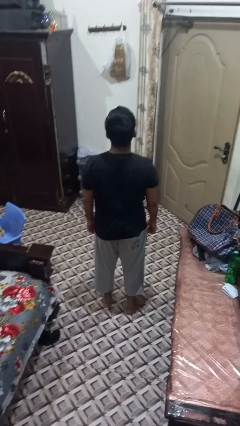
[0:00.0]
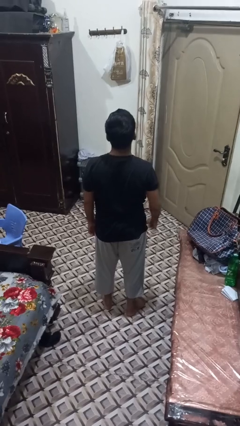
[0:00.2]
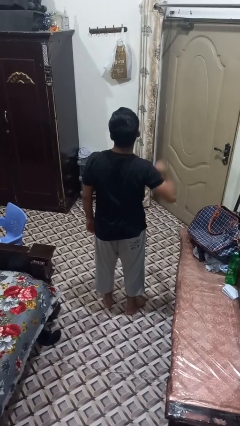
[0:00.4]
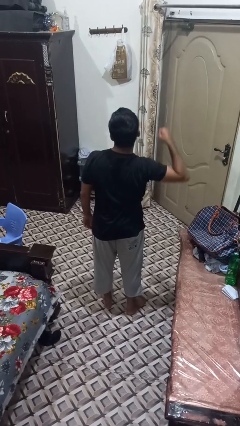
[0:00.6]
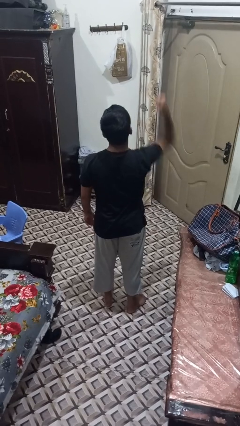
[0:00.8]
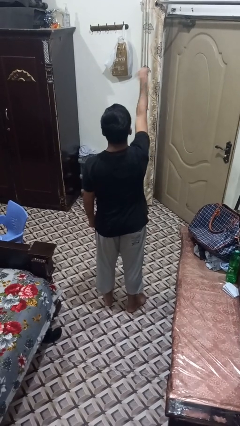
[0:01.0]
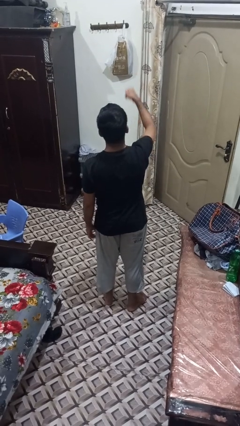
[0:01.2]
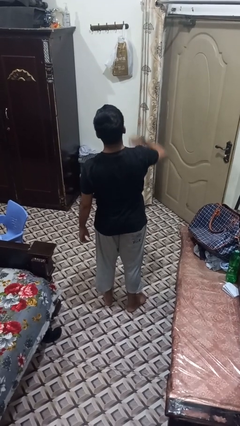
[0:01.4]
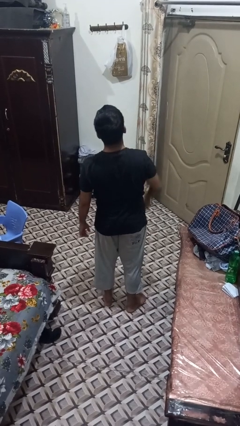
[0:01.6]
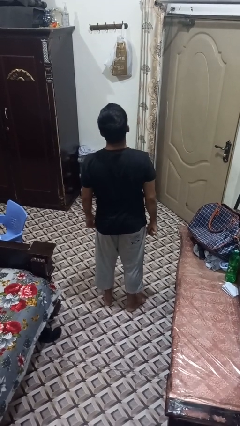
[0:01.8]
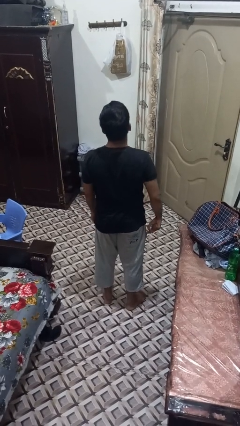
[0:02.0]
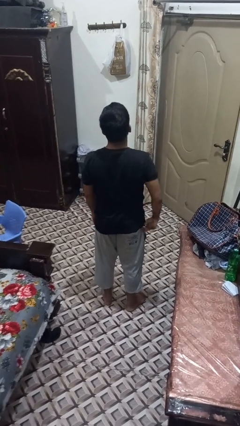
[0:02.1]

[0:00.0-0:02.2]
person punches

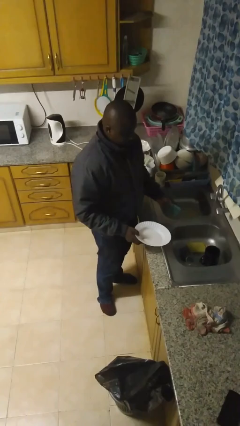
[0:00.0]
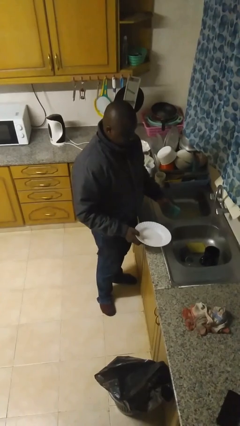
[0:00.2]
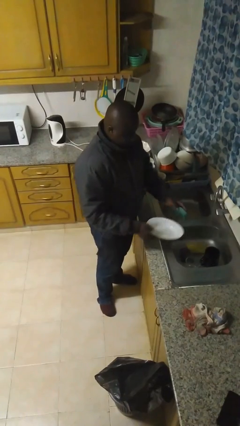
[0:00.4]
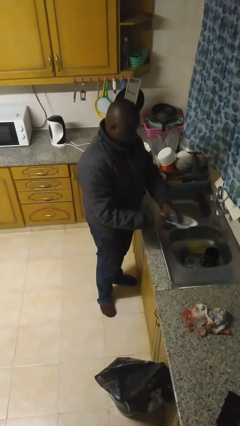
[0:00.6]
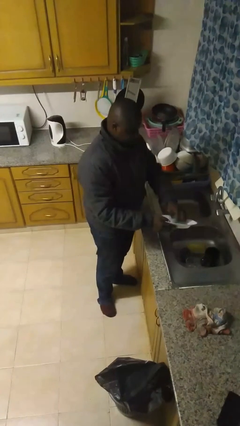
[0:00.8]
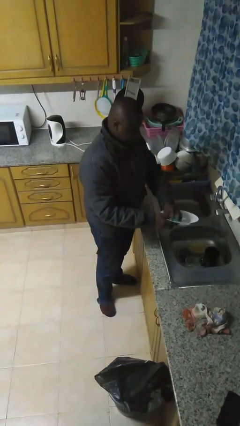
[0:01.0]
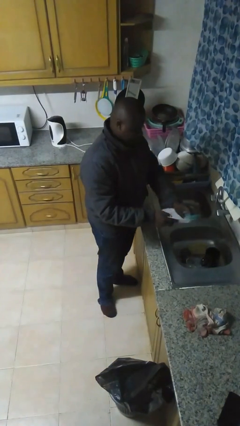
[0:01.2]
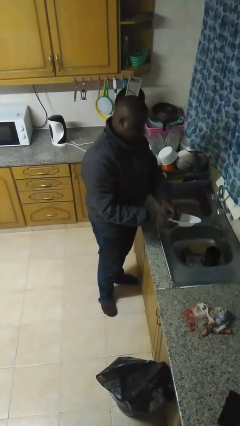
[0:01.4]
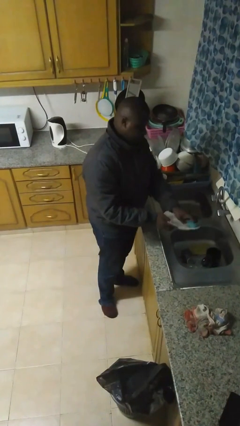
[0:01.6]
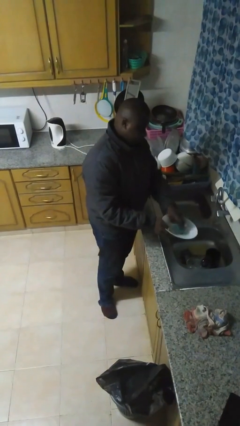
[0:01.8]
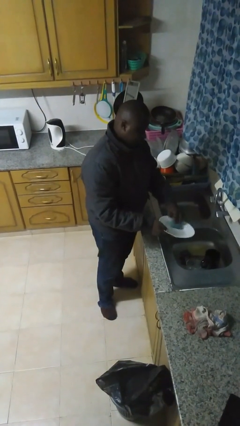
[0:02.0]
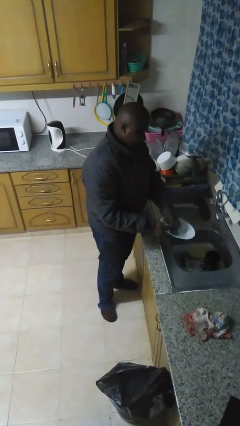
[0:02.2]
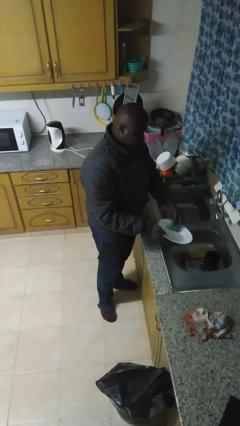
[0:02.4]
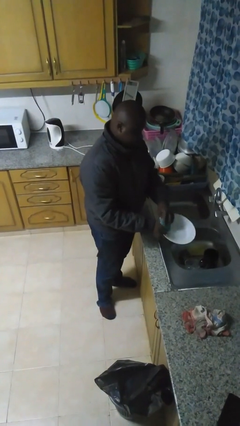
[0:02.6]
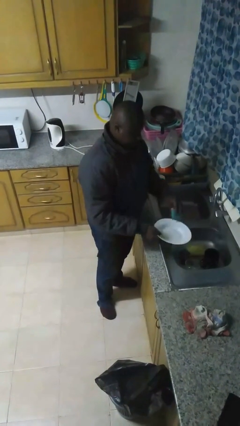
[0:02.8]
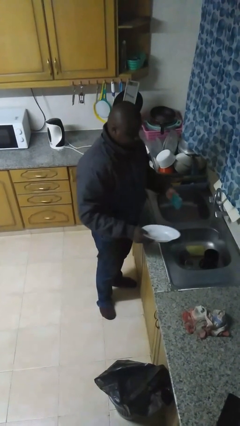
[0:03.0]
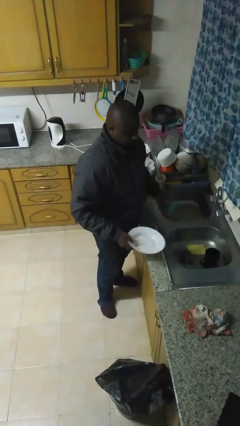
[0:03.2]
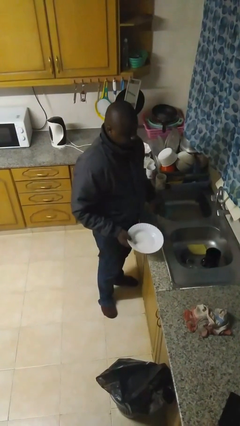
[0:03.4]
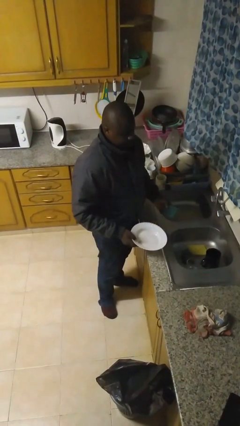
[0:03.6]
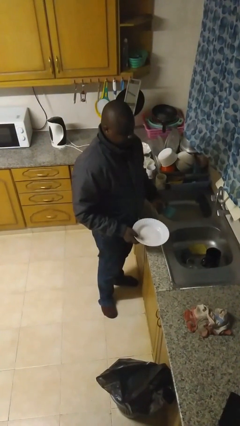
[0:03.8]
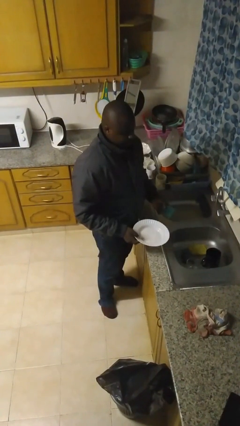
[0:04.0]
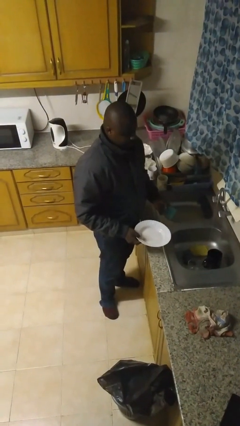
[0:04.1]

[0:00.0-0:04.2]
person washes dish

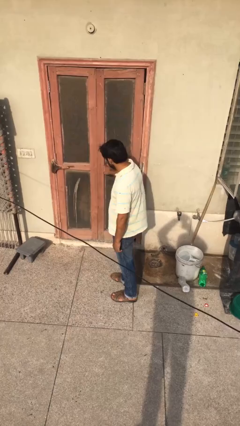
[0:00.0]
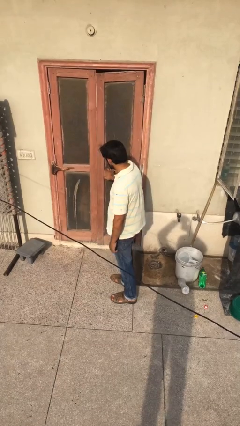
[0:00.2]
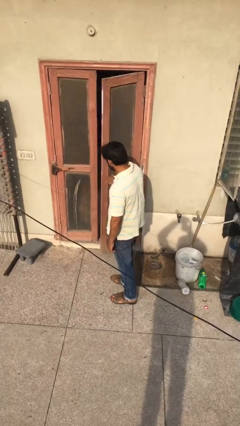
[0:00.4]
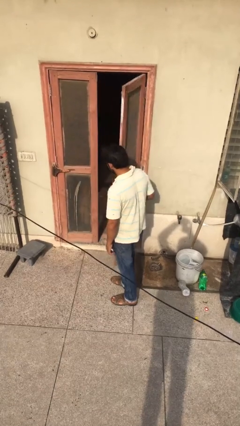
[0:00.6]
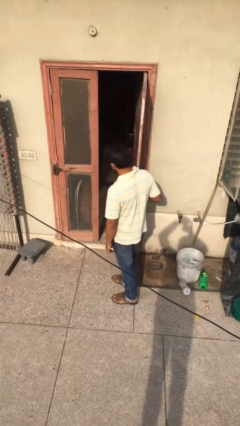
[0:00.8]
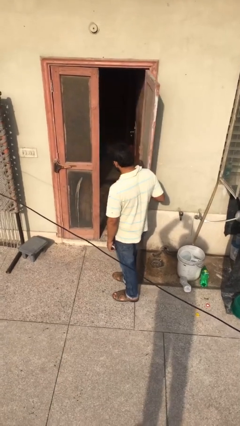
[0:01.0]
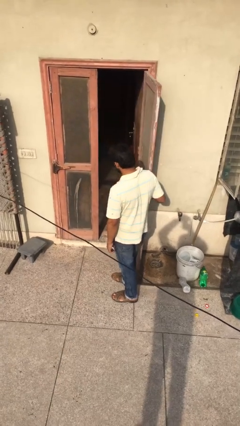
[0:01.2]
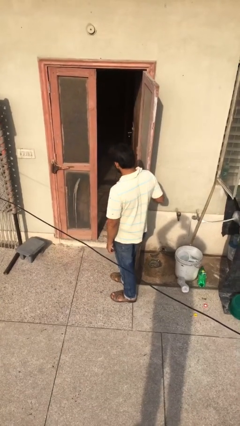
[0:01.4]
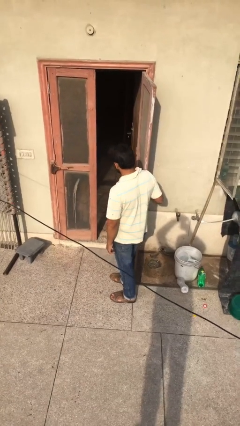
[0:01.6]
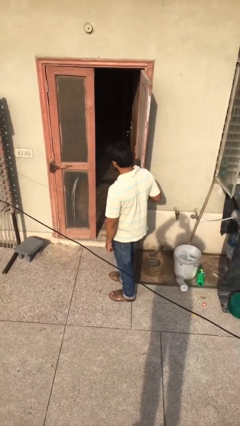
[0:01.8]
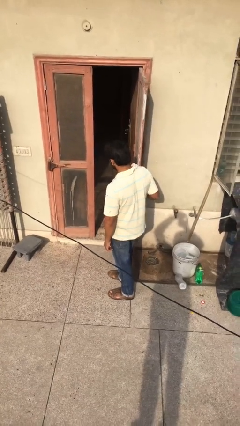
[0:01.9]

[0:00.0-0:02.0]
person opens facility door

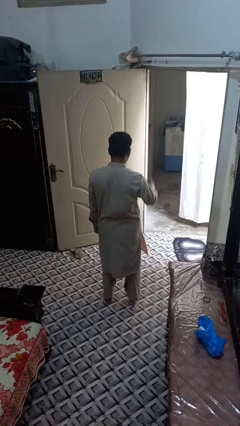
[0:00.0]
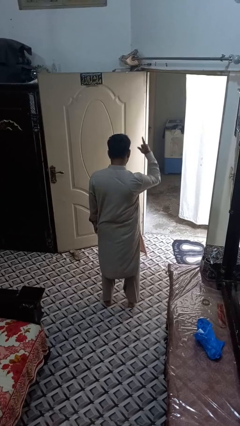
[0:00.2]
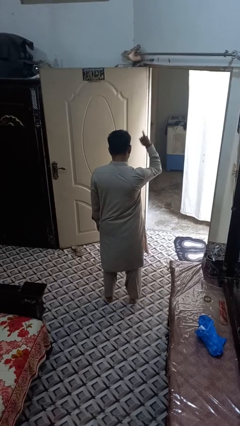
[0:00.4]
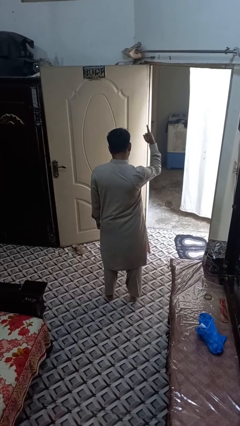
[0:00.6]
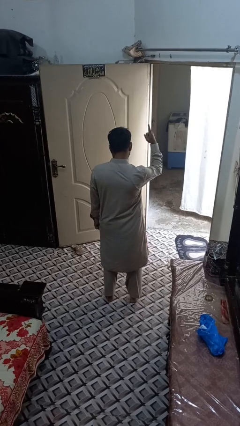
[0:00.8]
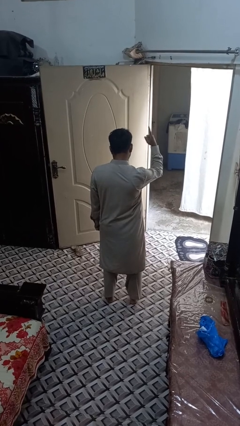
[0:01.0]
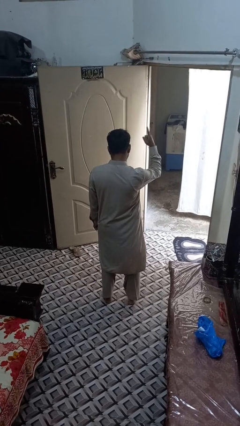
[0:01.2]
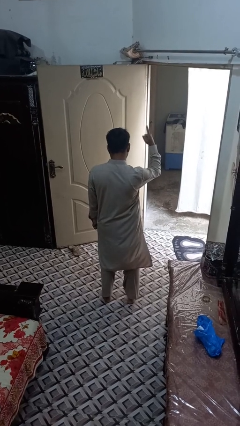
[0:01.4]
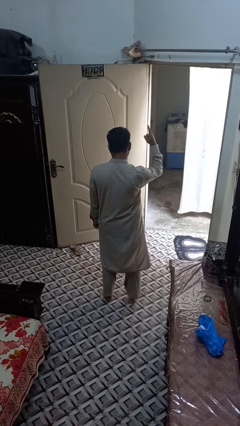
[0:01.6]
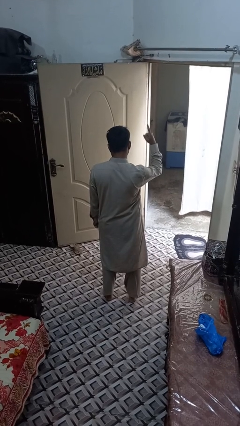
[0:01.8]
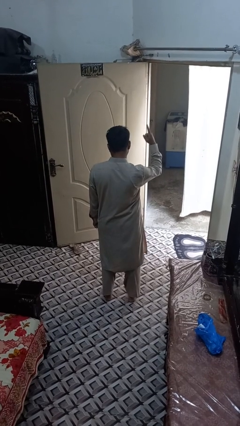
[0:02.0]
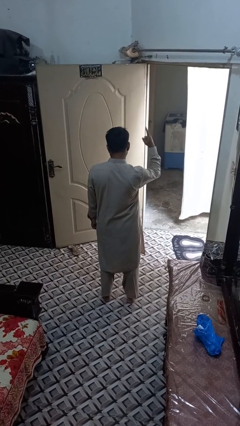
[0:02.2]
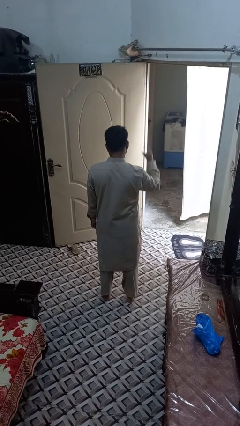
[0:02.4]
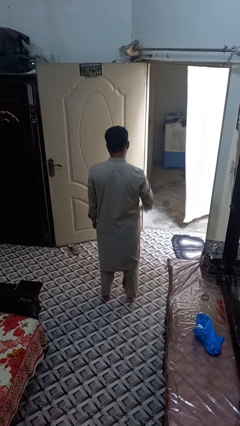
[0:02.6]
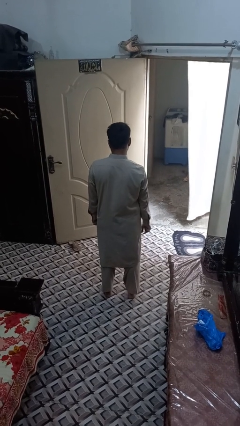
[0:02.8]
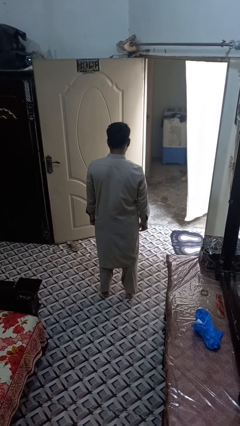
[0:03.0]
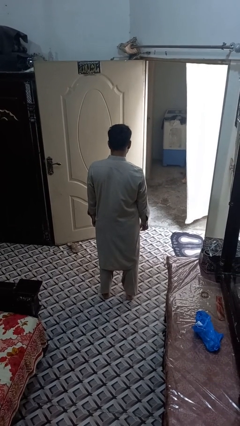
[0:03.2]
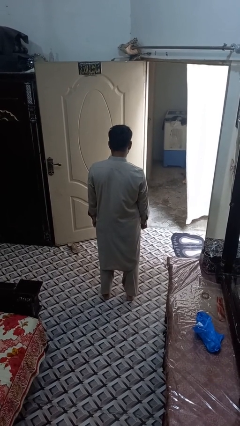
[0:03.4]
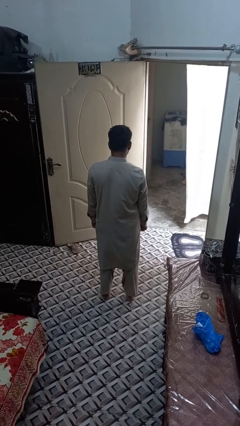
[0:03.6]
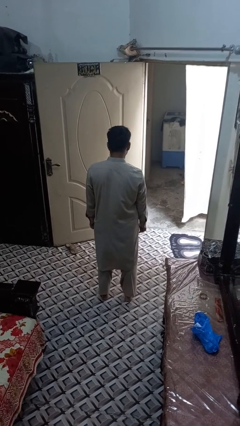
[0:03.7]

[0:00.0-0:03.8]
person gestures number one

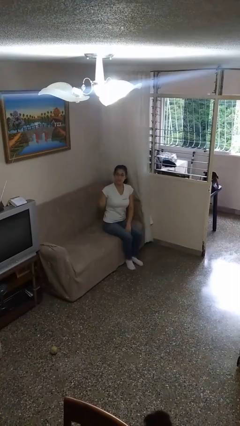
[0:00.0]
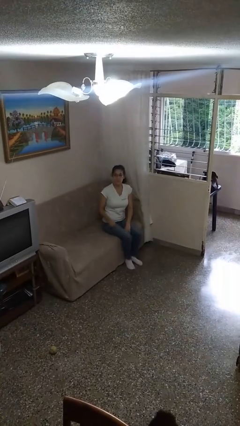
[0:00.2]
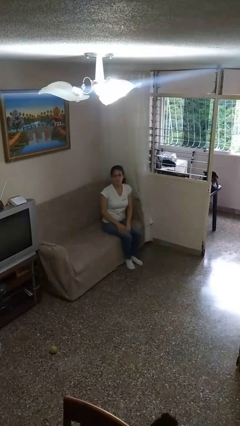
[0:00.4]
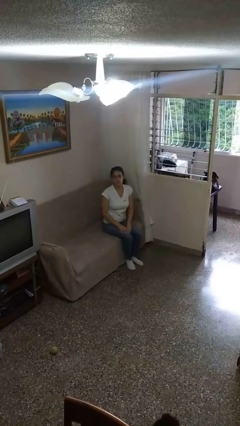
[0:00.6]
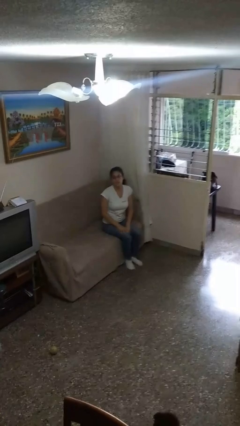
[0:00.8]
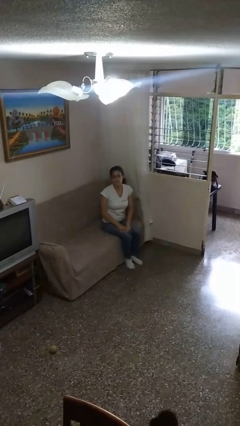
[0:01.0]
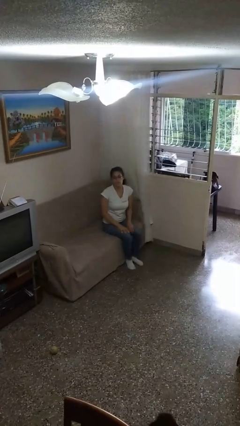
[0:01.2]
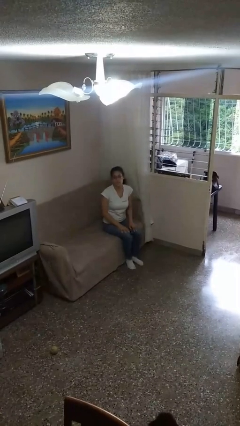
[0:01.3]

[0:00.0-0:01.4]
person gestures lower hand

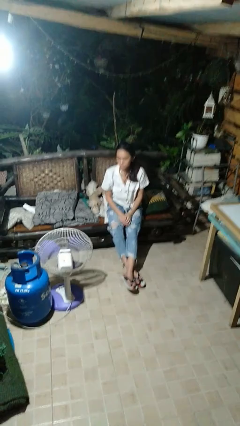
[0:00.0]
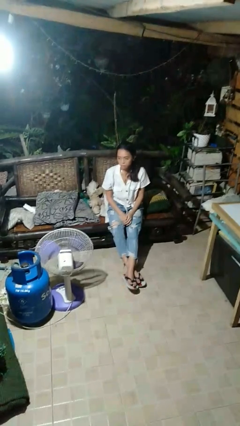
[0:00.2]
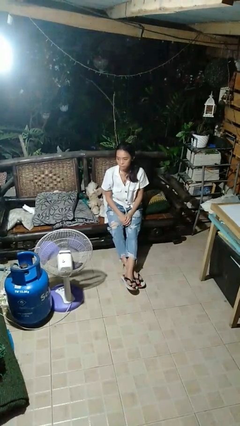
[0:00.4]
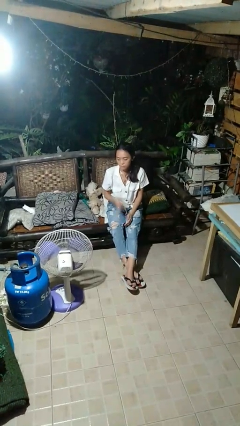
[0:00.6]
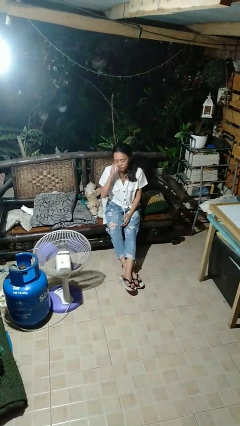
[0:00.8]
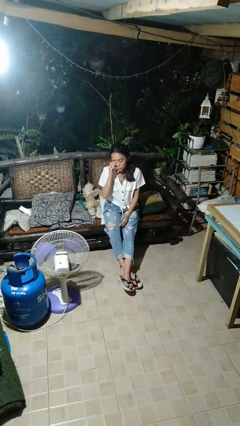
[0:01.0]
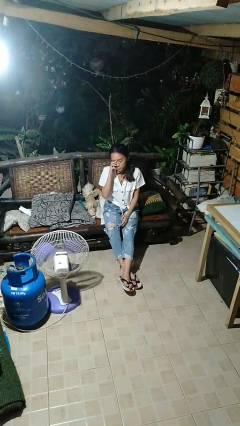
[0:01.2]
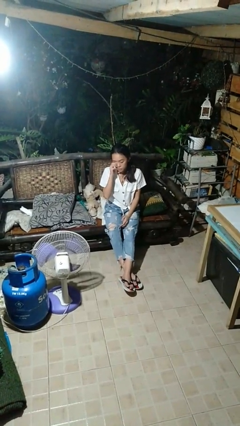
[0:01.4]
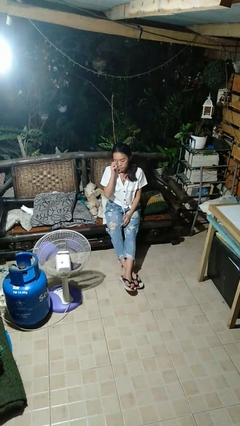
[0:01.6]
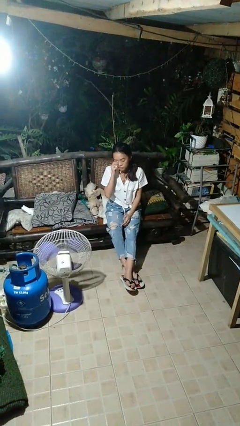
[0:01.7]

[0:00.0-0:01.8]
person rubs eyes

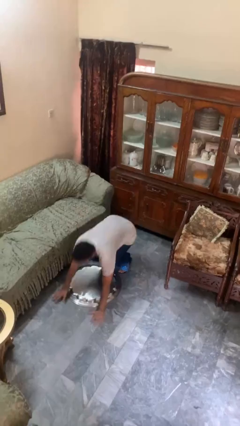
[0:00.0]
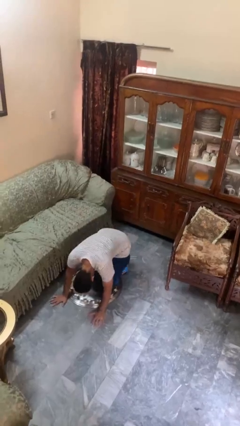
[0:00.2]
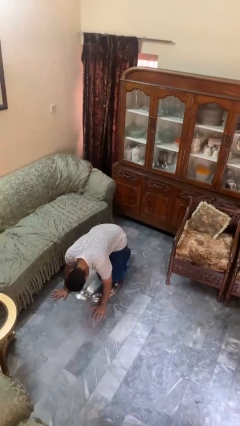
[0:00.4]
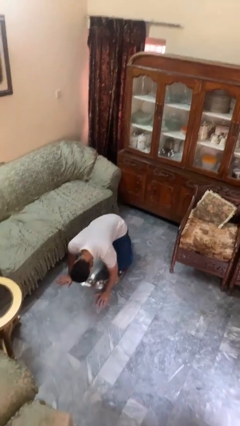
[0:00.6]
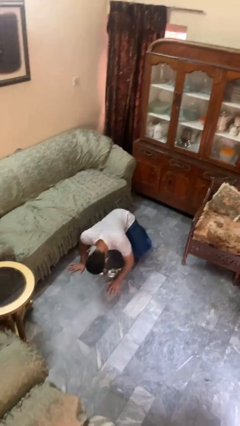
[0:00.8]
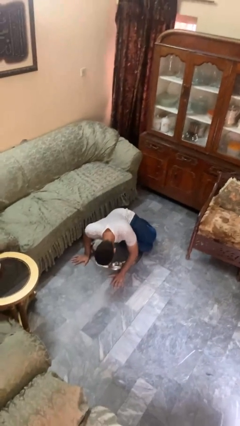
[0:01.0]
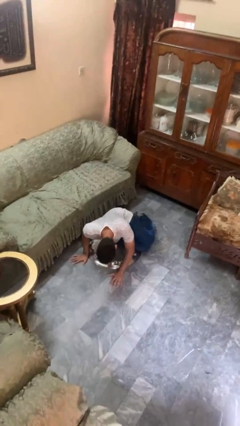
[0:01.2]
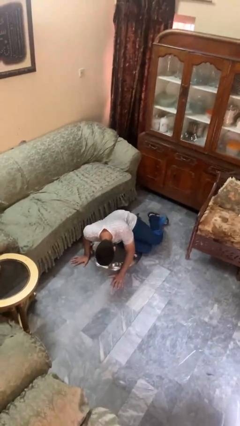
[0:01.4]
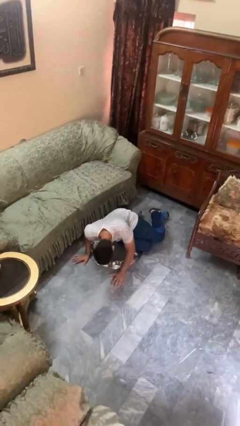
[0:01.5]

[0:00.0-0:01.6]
person trips on object on floor
